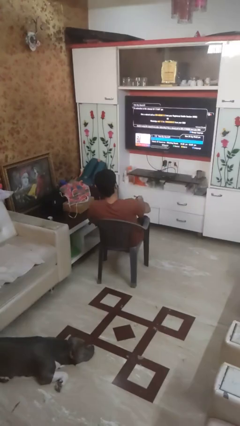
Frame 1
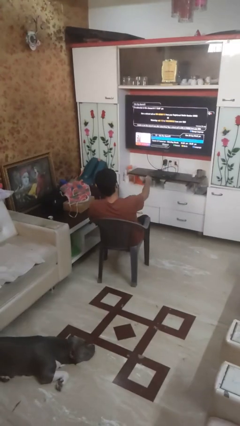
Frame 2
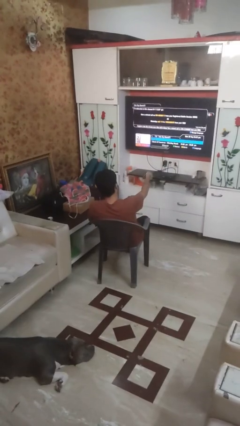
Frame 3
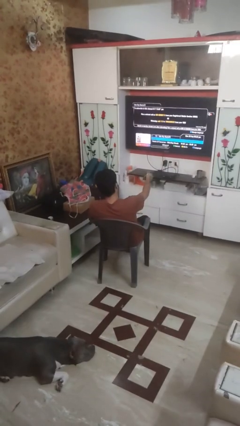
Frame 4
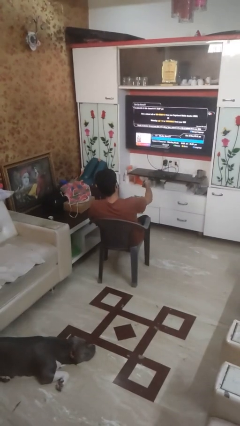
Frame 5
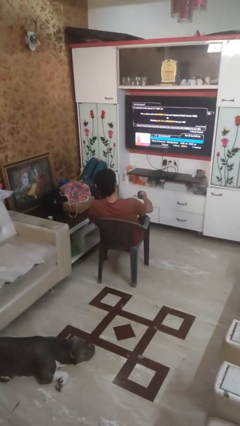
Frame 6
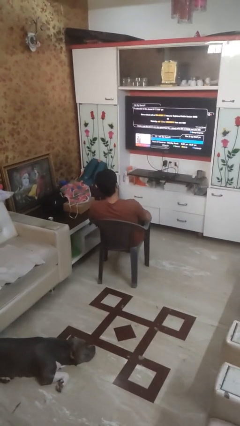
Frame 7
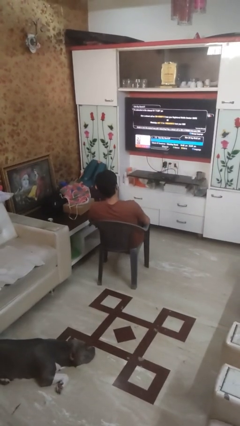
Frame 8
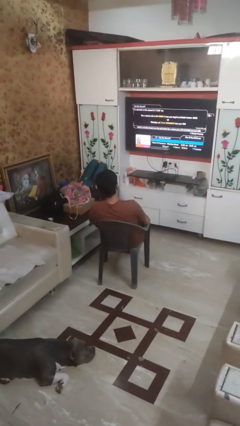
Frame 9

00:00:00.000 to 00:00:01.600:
person uses television remote

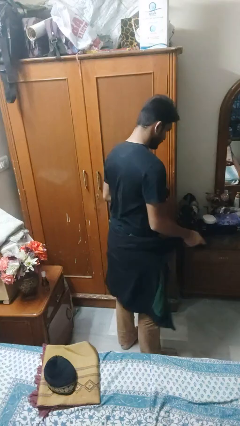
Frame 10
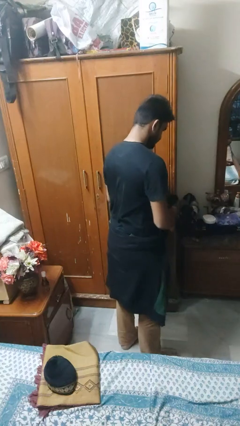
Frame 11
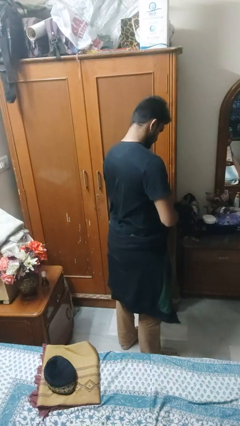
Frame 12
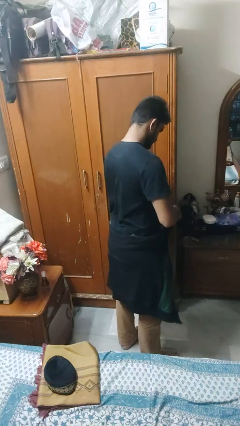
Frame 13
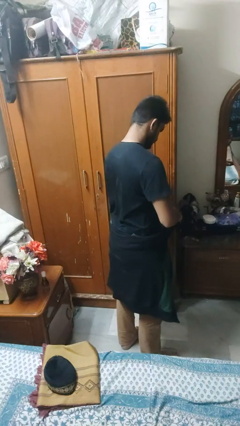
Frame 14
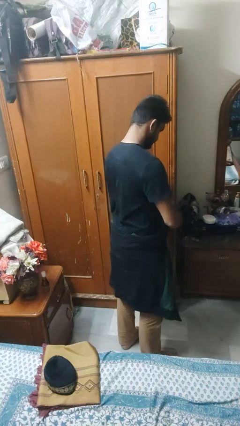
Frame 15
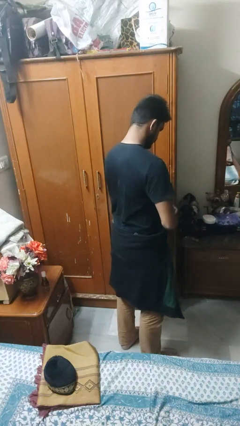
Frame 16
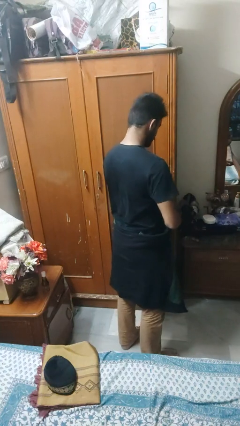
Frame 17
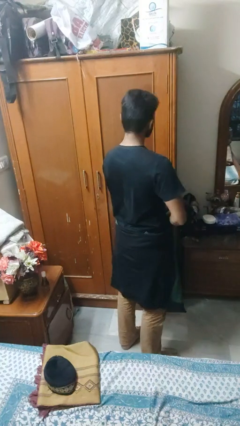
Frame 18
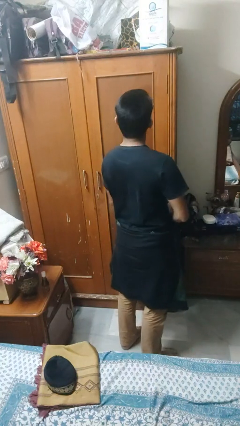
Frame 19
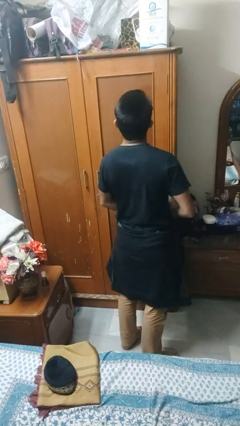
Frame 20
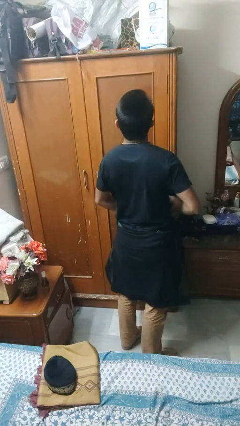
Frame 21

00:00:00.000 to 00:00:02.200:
person ties jacket around waist

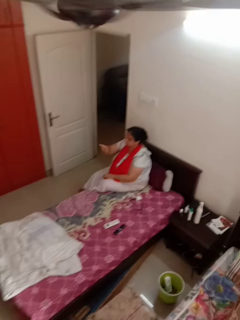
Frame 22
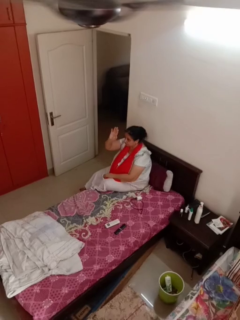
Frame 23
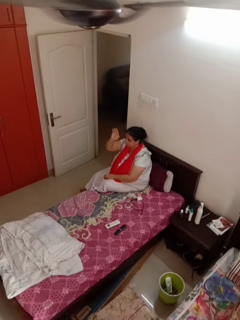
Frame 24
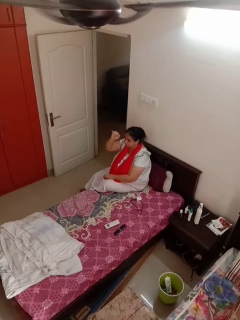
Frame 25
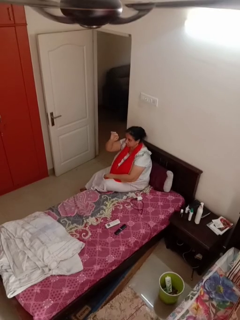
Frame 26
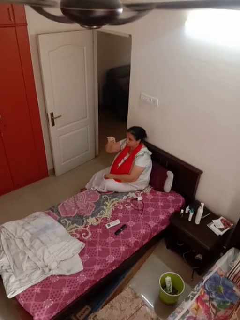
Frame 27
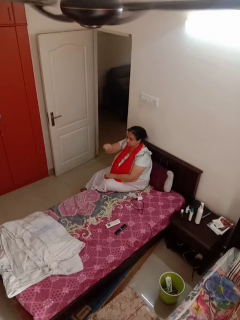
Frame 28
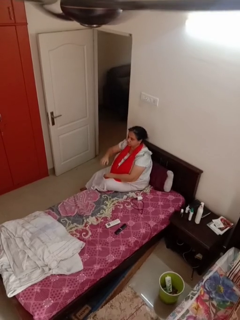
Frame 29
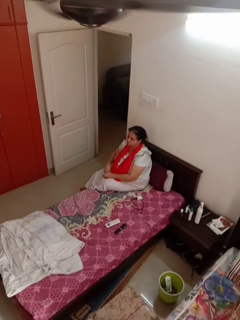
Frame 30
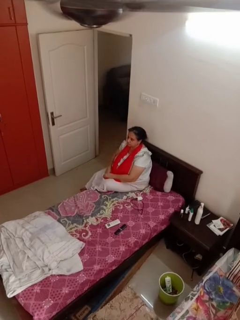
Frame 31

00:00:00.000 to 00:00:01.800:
person gestures come here

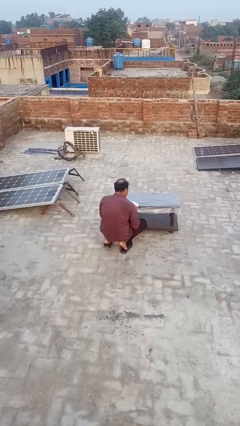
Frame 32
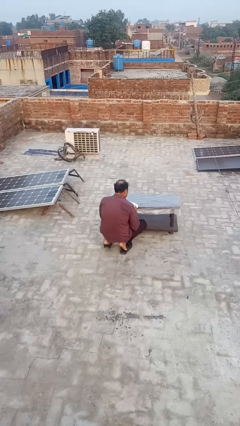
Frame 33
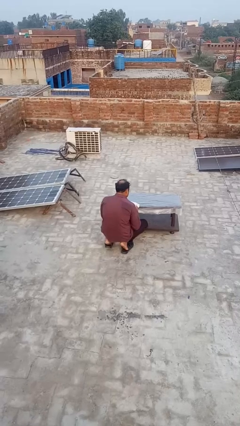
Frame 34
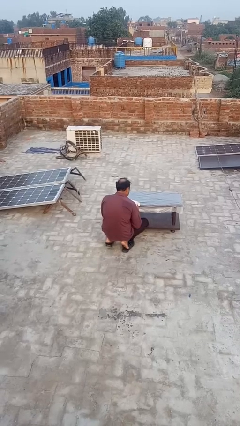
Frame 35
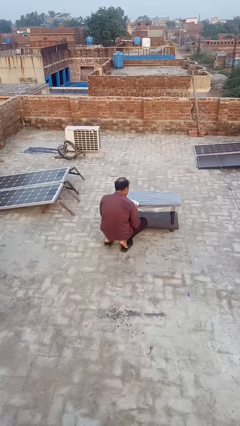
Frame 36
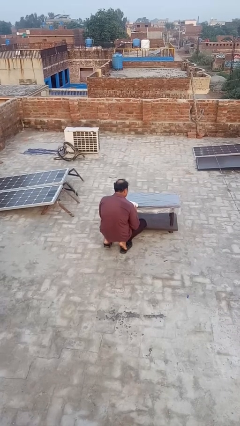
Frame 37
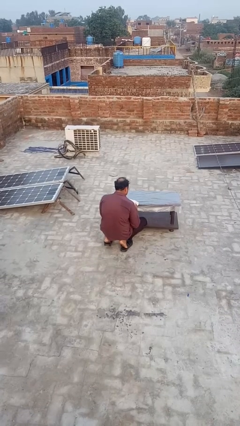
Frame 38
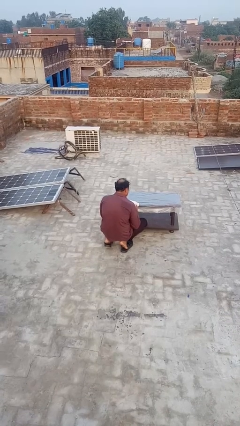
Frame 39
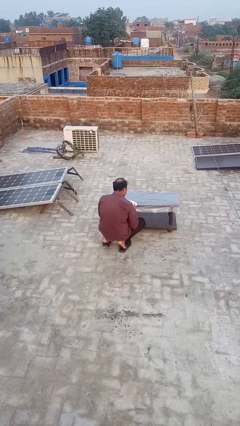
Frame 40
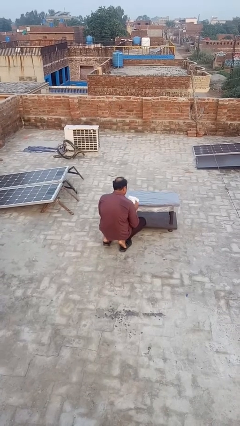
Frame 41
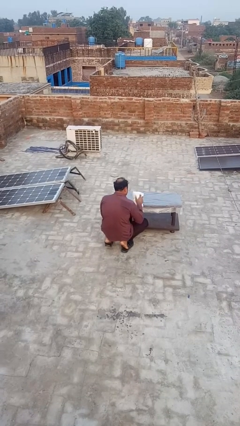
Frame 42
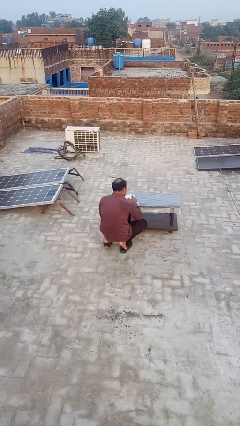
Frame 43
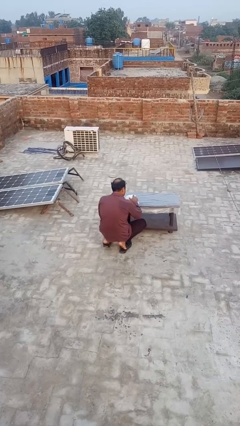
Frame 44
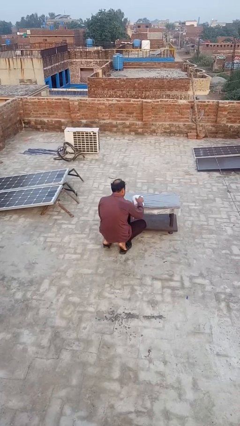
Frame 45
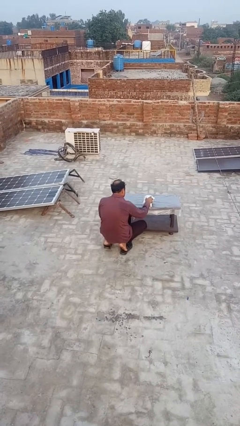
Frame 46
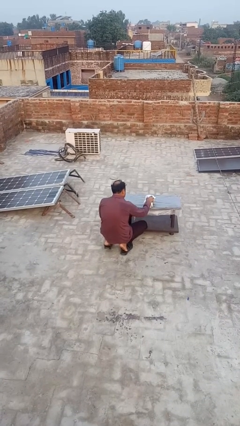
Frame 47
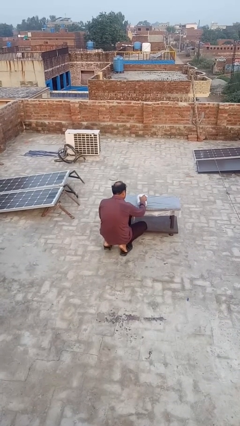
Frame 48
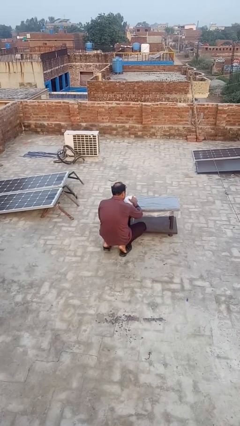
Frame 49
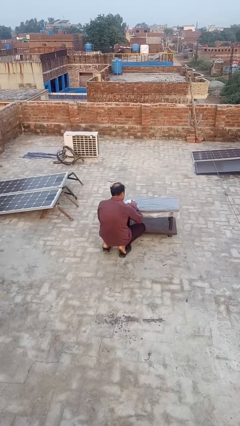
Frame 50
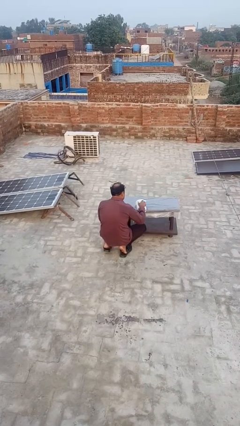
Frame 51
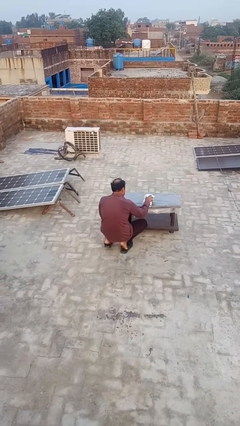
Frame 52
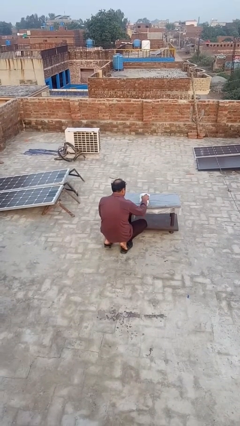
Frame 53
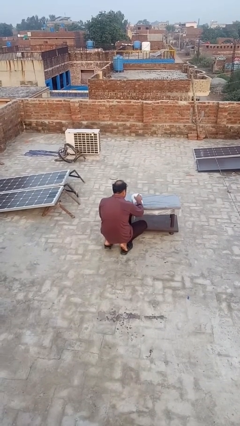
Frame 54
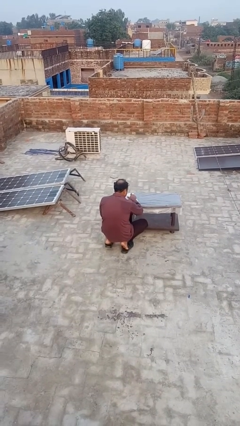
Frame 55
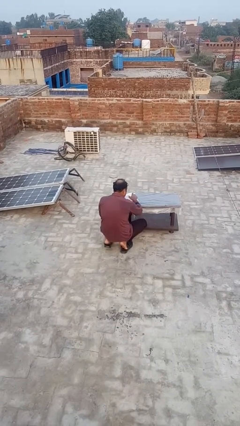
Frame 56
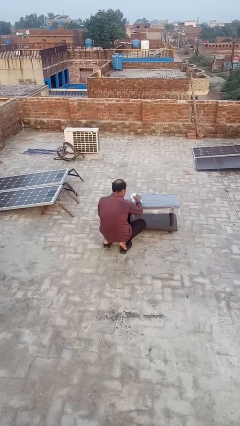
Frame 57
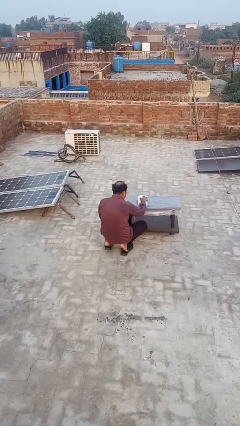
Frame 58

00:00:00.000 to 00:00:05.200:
person cleans table with rag

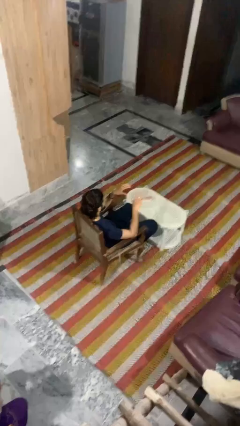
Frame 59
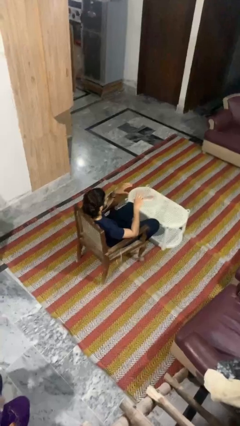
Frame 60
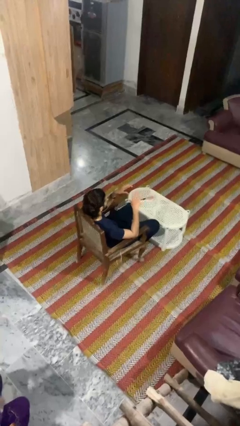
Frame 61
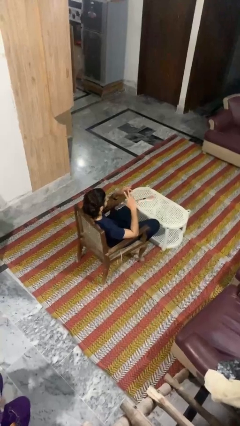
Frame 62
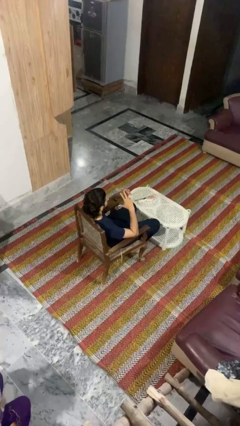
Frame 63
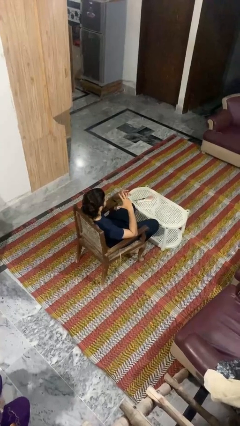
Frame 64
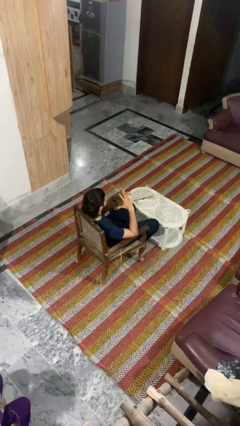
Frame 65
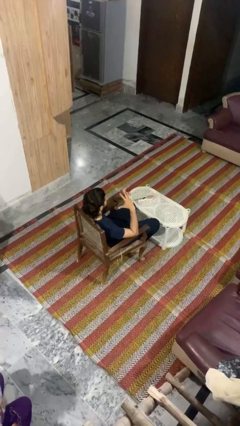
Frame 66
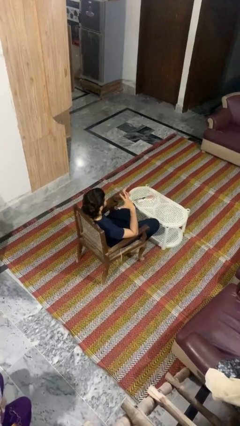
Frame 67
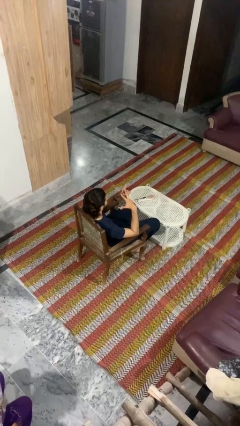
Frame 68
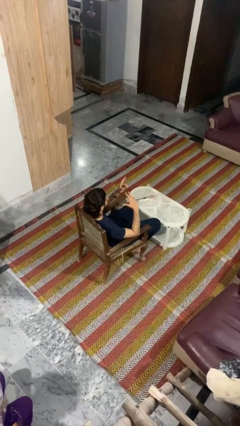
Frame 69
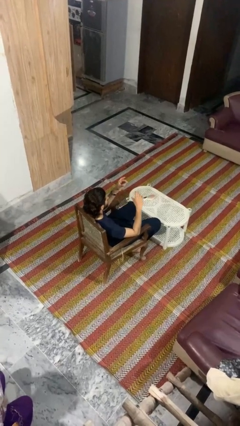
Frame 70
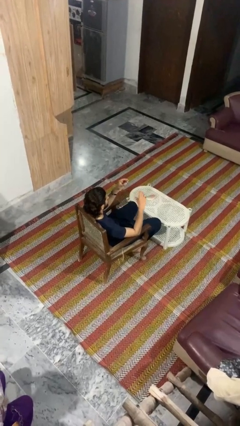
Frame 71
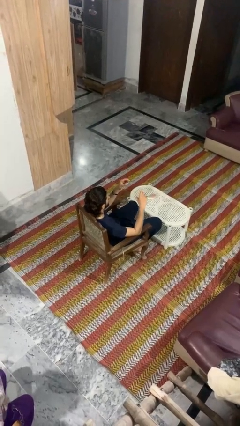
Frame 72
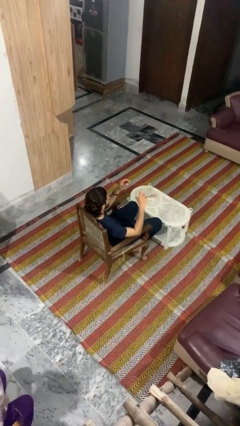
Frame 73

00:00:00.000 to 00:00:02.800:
person takes off ring

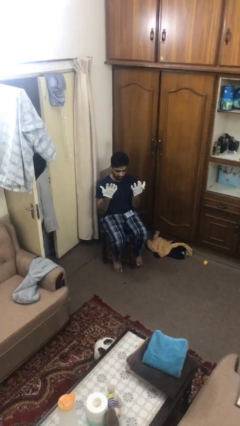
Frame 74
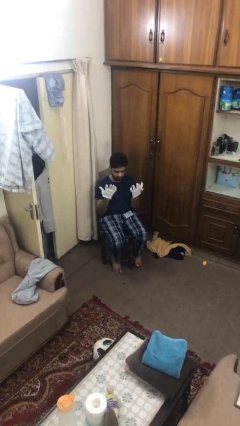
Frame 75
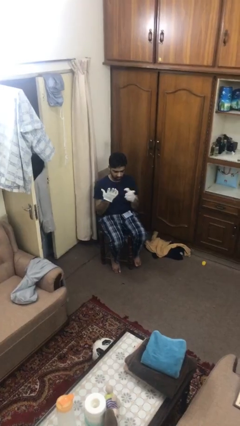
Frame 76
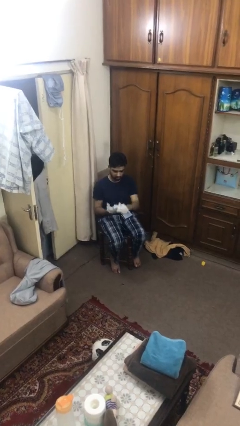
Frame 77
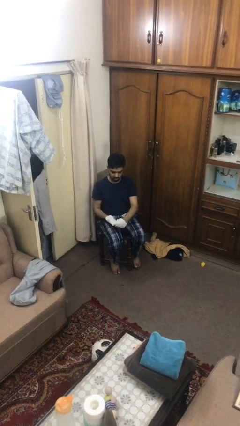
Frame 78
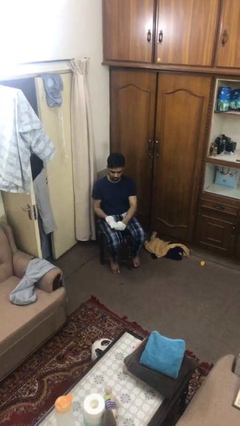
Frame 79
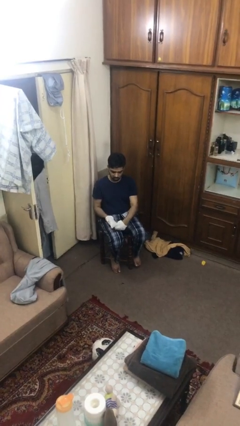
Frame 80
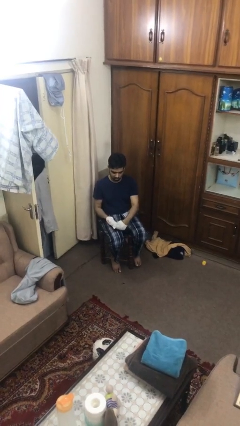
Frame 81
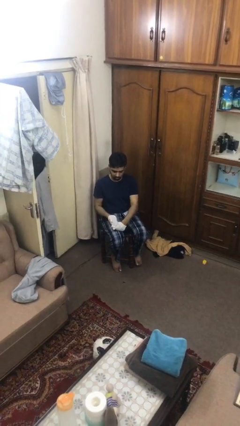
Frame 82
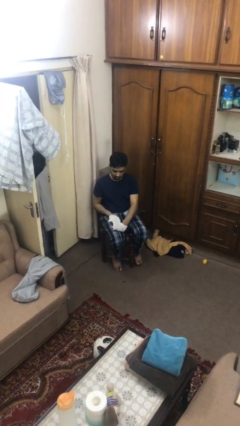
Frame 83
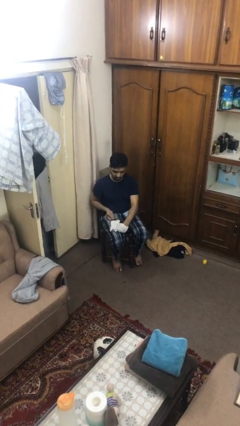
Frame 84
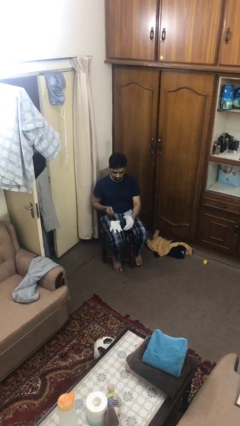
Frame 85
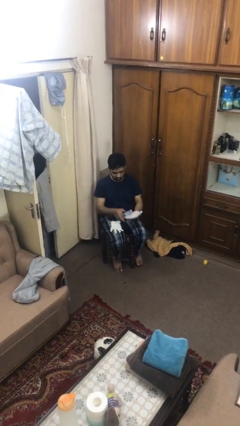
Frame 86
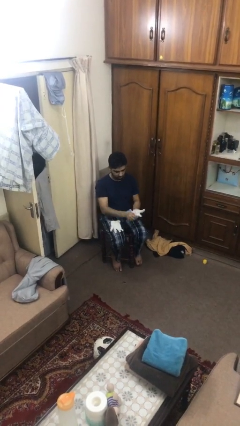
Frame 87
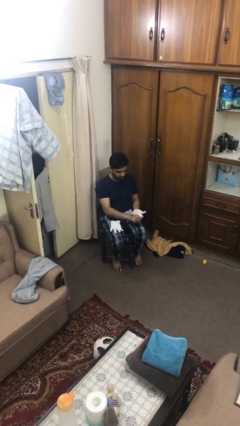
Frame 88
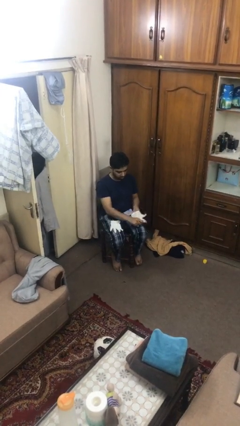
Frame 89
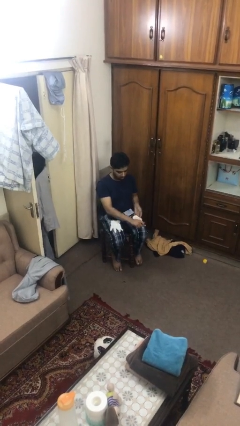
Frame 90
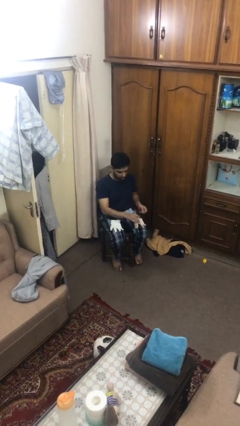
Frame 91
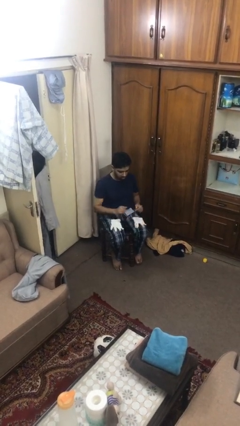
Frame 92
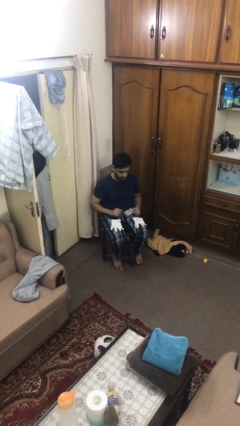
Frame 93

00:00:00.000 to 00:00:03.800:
person takes off gloves

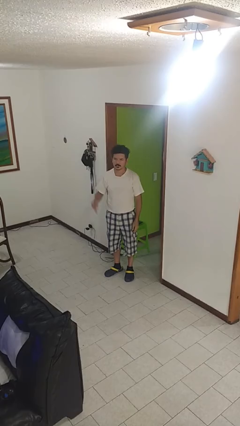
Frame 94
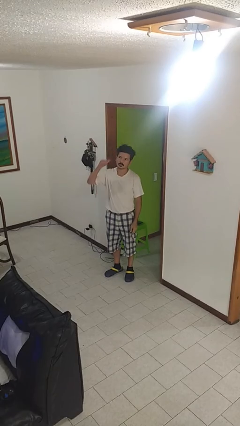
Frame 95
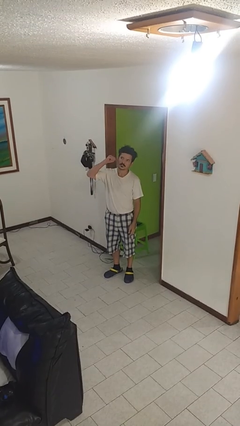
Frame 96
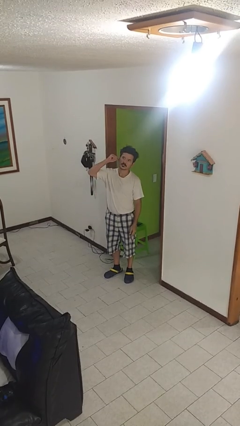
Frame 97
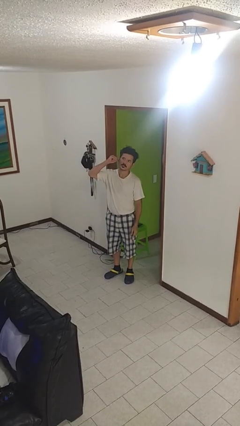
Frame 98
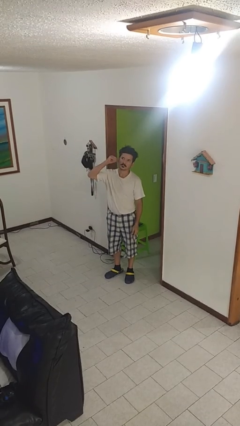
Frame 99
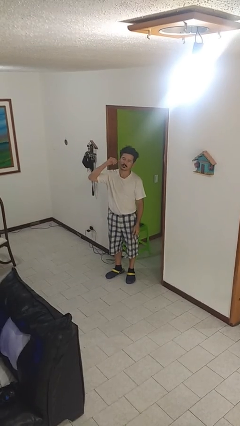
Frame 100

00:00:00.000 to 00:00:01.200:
person gestures call me
